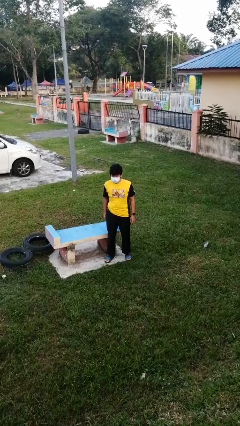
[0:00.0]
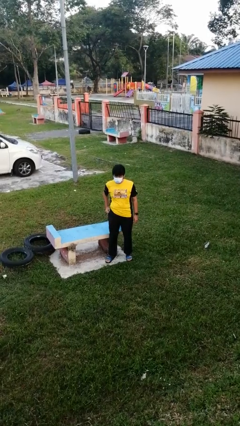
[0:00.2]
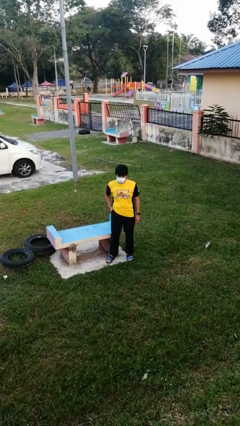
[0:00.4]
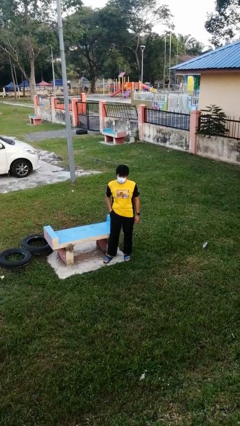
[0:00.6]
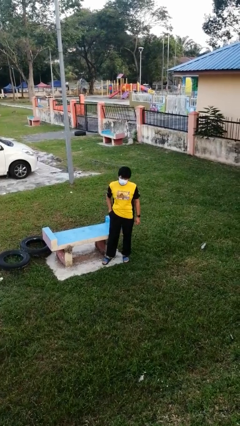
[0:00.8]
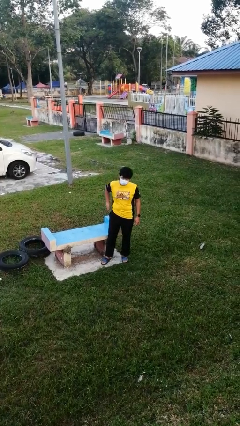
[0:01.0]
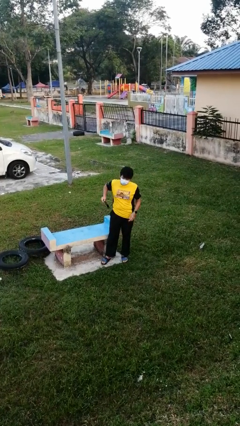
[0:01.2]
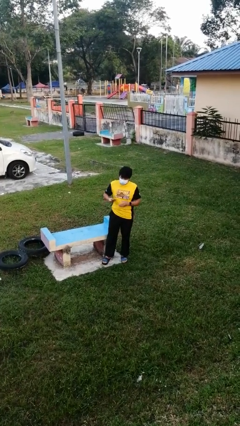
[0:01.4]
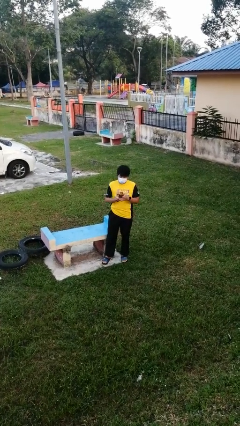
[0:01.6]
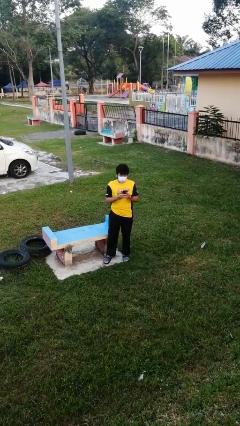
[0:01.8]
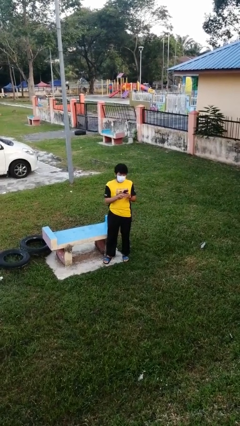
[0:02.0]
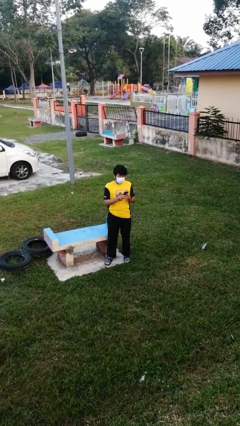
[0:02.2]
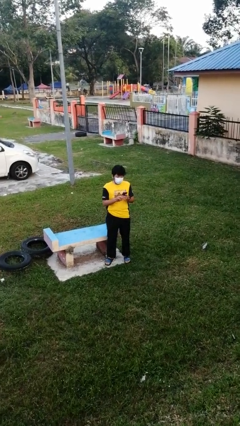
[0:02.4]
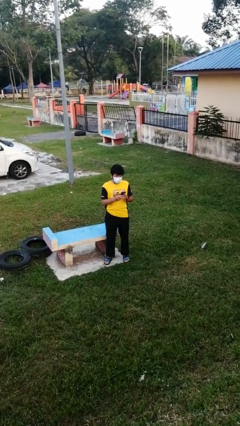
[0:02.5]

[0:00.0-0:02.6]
person takes phone from pocket

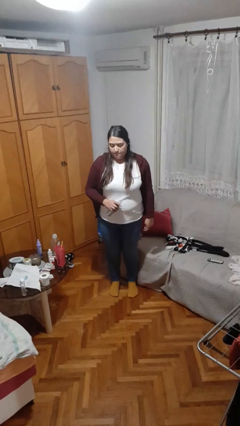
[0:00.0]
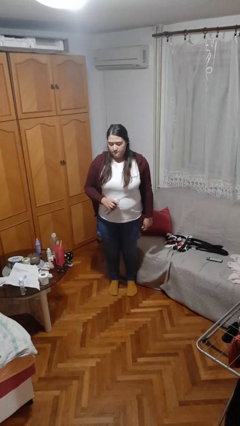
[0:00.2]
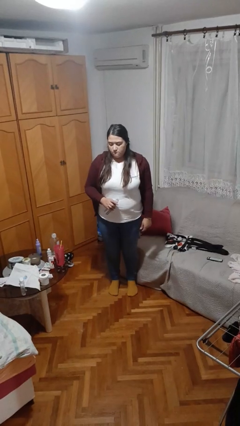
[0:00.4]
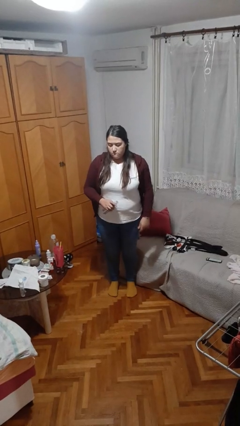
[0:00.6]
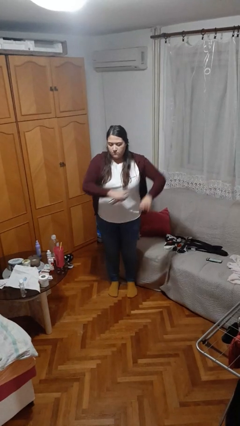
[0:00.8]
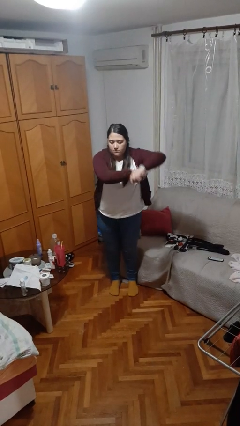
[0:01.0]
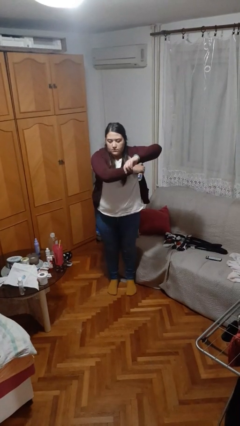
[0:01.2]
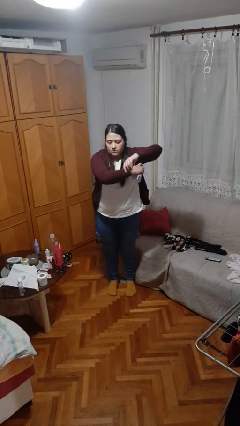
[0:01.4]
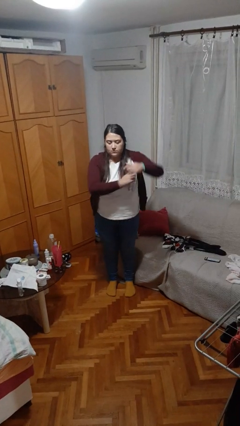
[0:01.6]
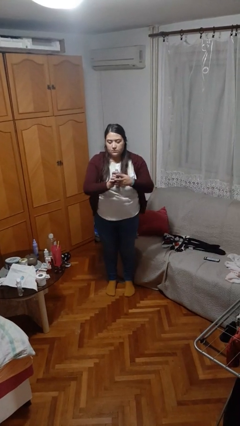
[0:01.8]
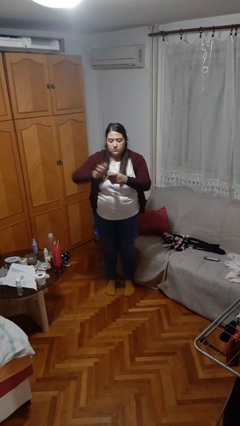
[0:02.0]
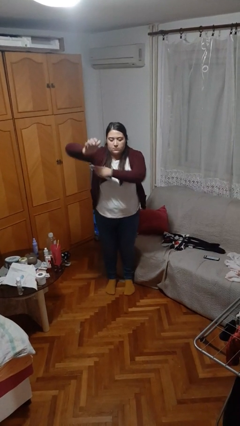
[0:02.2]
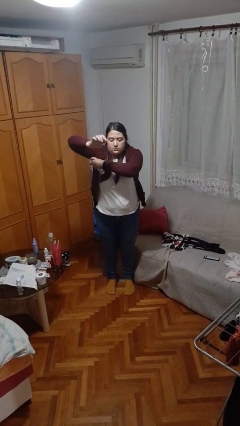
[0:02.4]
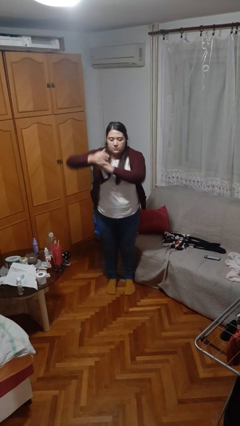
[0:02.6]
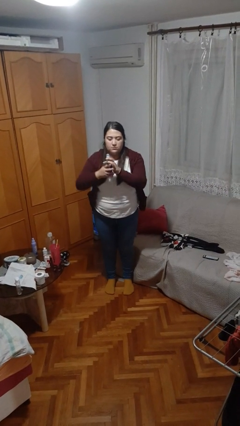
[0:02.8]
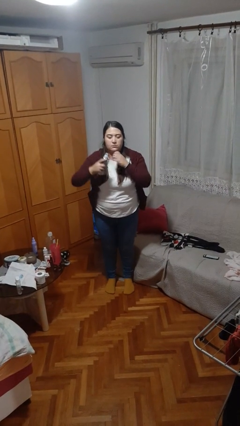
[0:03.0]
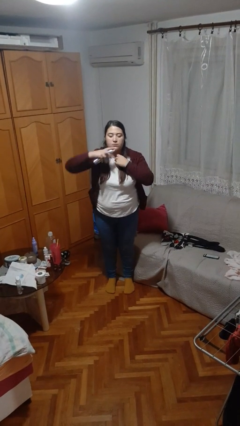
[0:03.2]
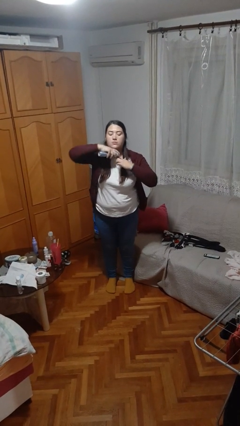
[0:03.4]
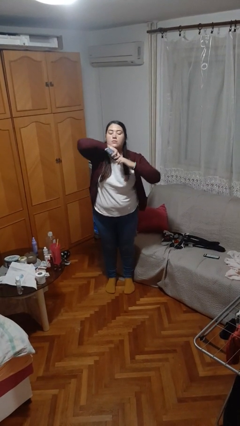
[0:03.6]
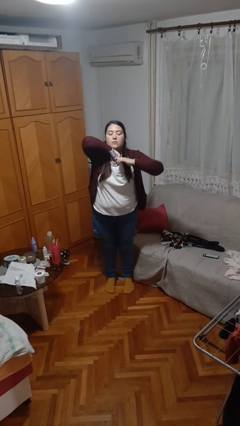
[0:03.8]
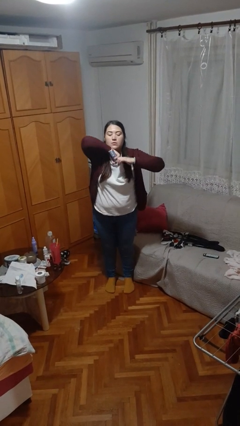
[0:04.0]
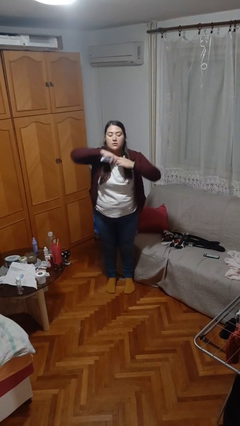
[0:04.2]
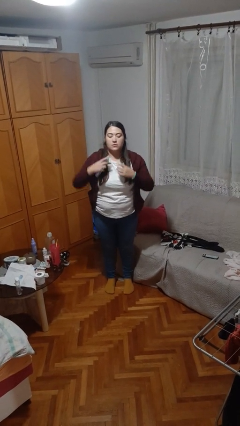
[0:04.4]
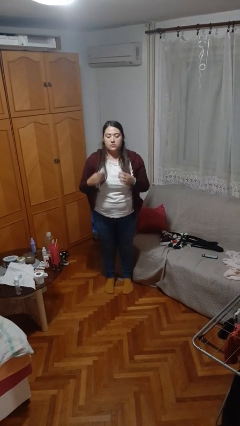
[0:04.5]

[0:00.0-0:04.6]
person applies deodorant

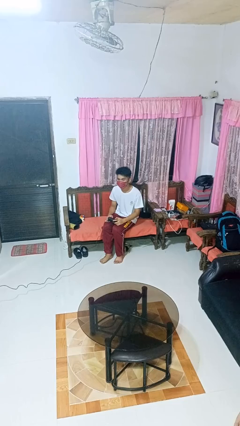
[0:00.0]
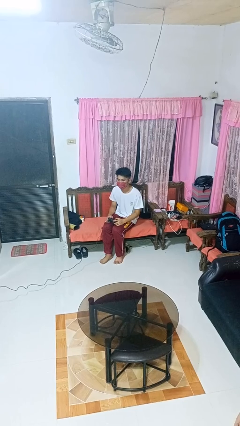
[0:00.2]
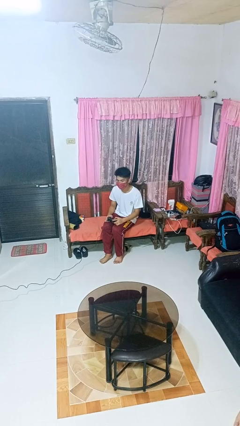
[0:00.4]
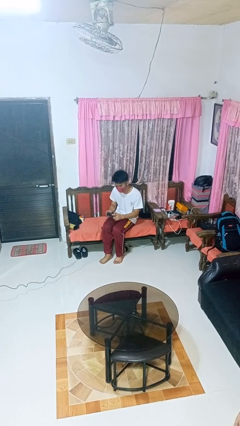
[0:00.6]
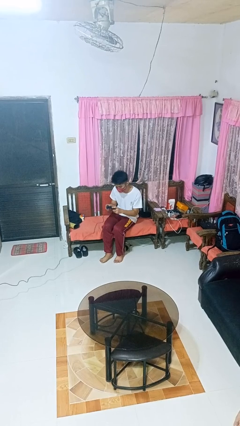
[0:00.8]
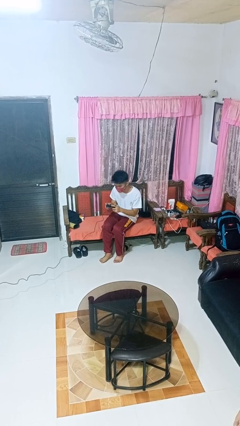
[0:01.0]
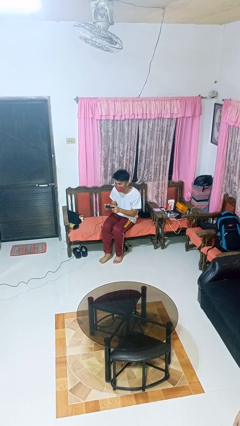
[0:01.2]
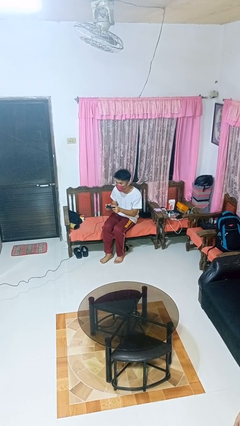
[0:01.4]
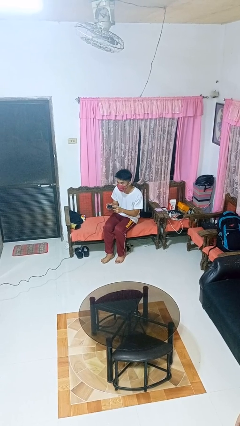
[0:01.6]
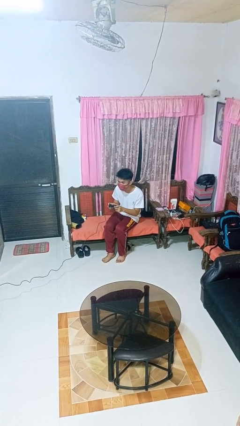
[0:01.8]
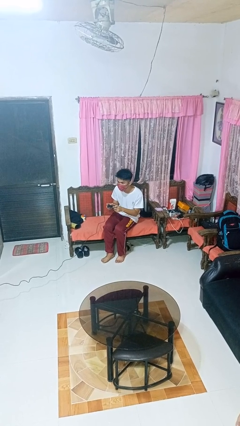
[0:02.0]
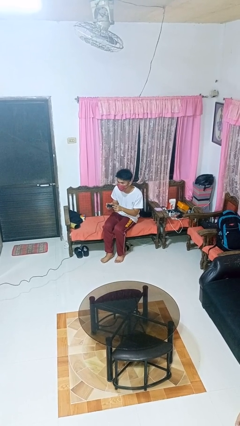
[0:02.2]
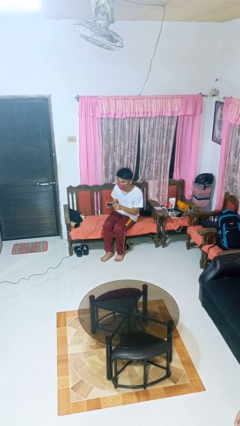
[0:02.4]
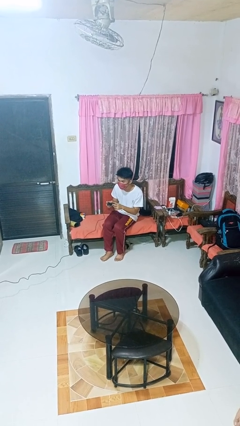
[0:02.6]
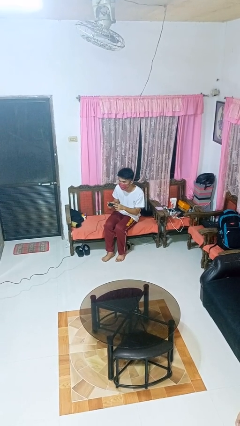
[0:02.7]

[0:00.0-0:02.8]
person interacts with handheld game

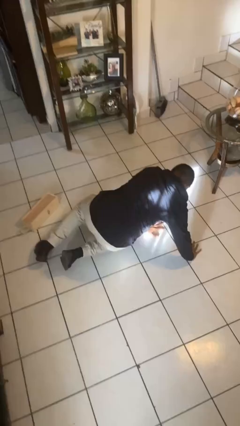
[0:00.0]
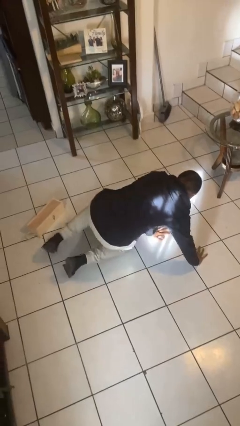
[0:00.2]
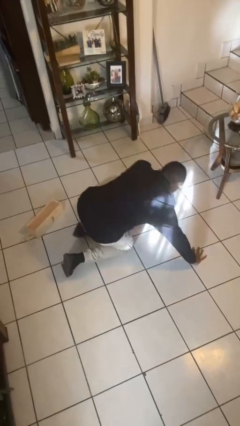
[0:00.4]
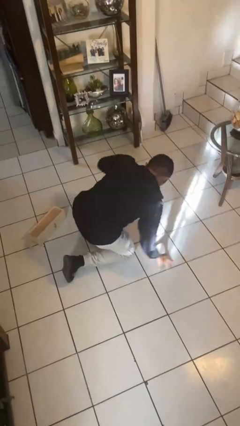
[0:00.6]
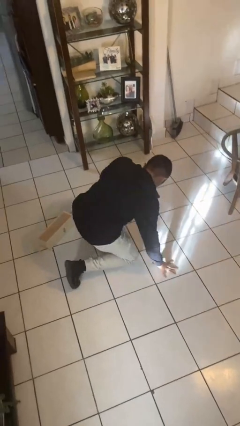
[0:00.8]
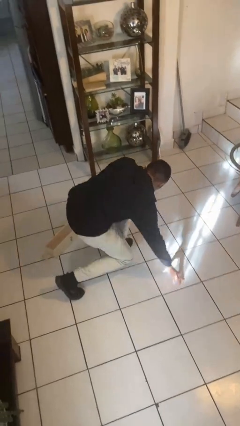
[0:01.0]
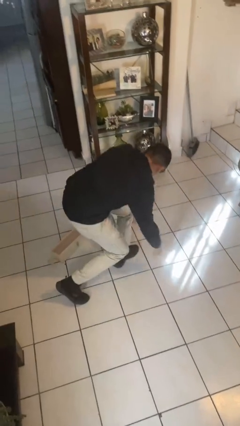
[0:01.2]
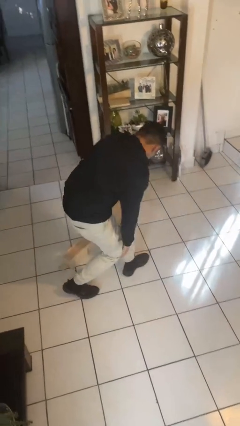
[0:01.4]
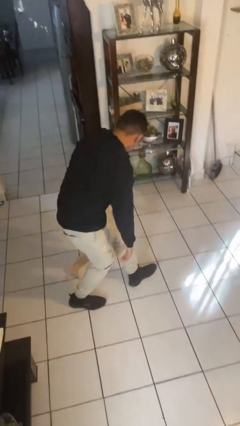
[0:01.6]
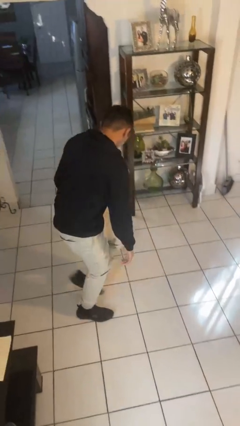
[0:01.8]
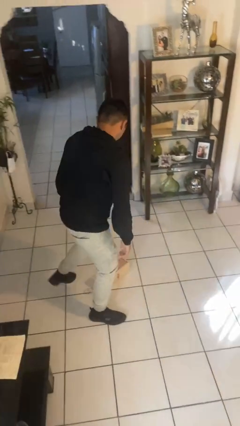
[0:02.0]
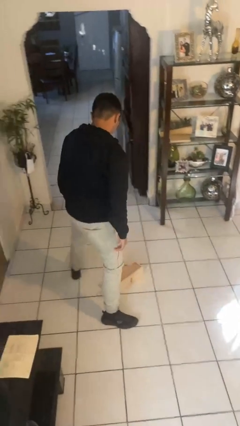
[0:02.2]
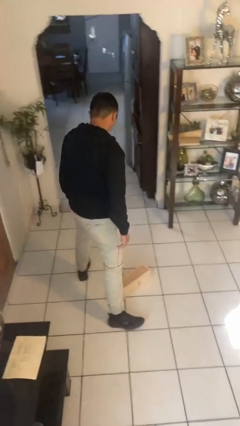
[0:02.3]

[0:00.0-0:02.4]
person stands up from floor

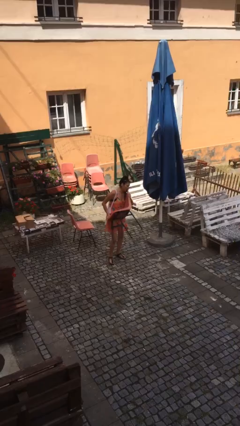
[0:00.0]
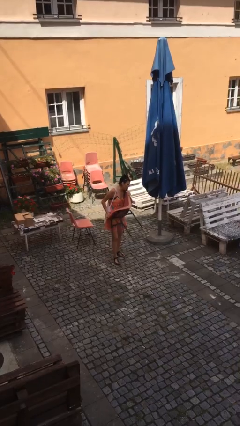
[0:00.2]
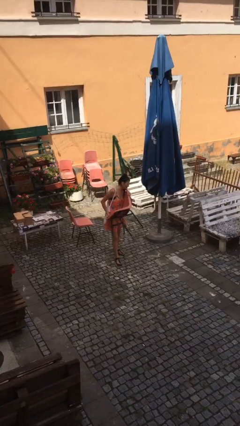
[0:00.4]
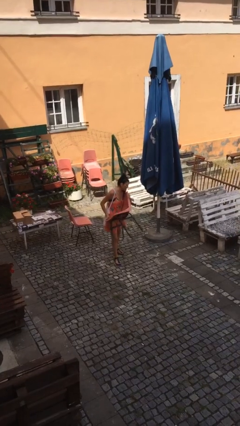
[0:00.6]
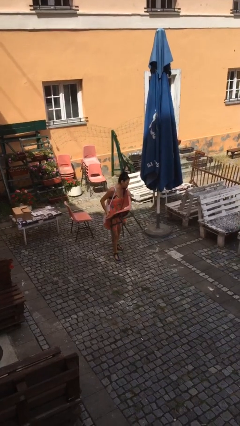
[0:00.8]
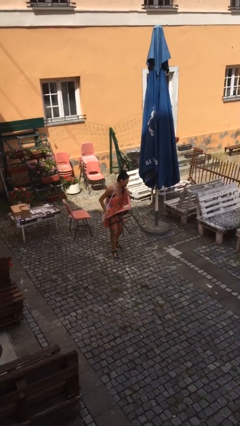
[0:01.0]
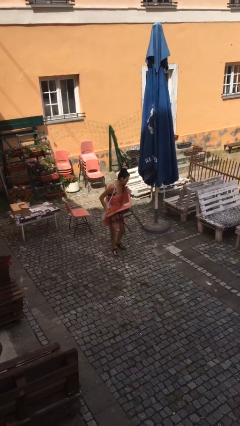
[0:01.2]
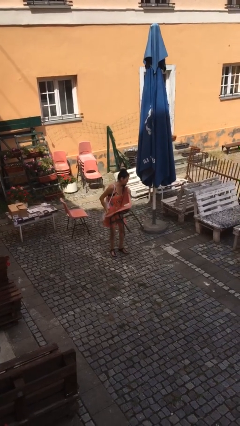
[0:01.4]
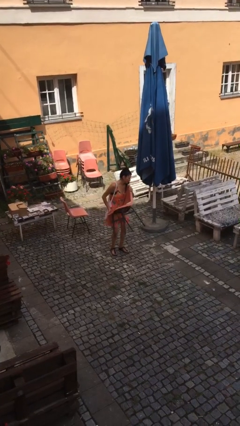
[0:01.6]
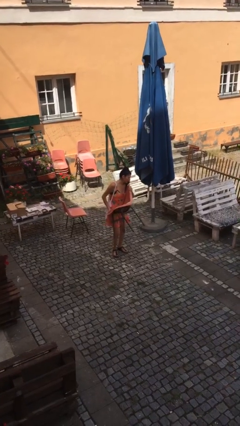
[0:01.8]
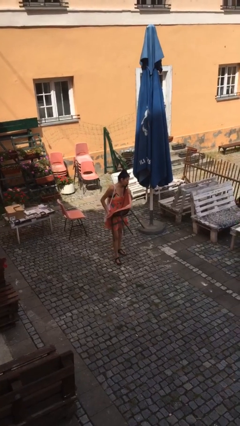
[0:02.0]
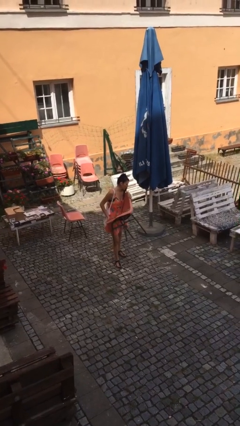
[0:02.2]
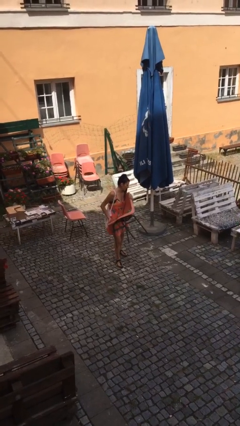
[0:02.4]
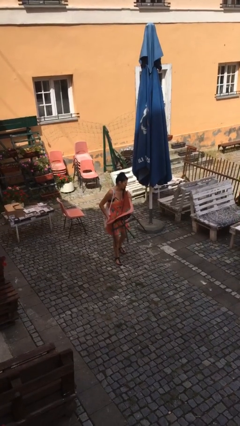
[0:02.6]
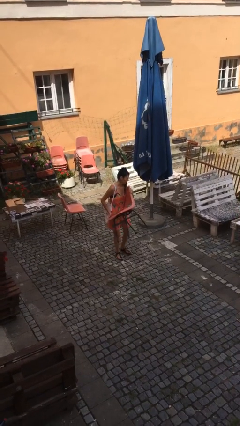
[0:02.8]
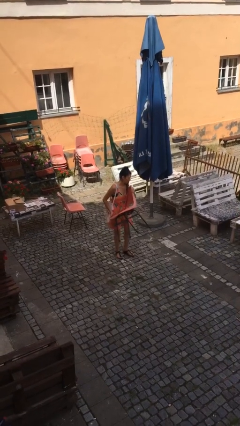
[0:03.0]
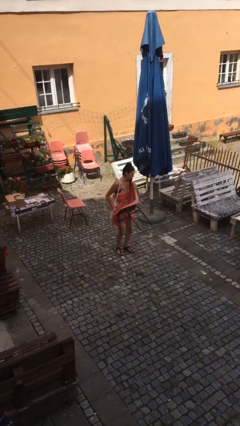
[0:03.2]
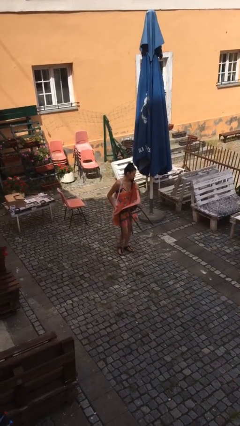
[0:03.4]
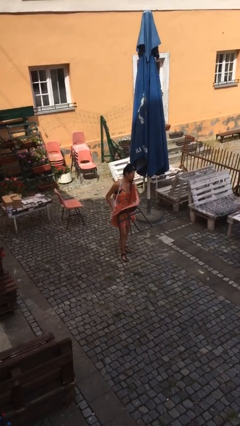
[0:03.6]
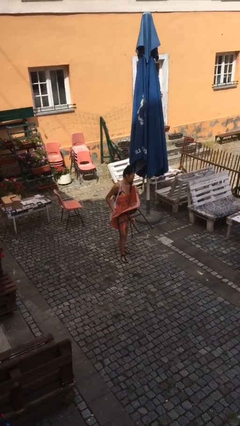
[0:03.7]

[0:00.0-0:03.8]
person carries heavy object

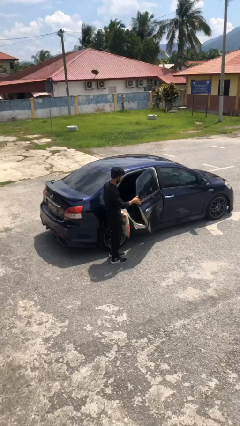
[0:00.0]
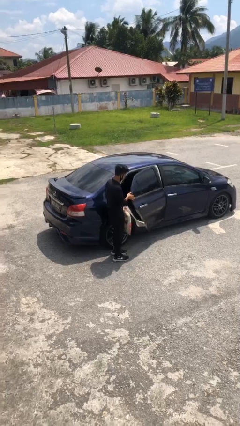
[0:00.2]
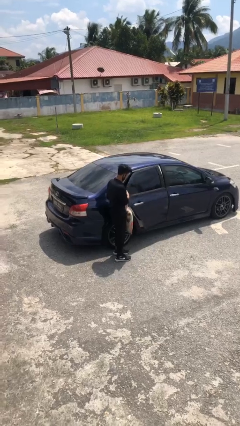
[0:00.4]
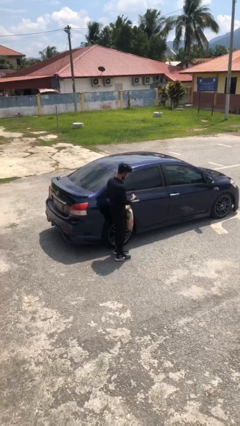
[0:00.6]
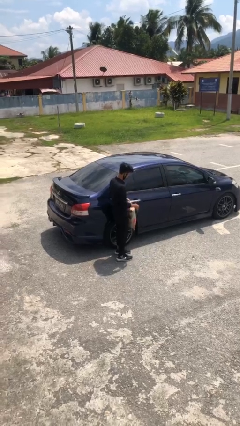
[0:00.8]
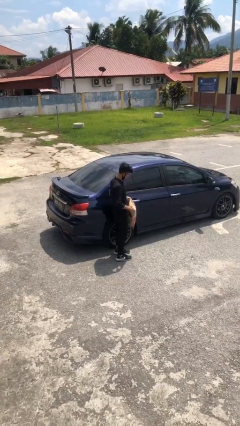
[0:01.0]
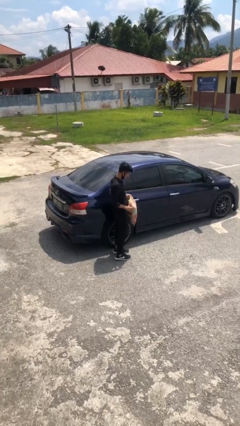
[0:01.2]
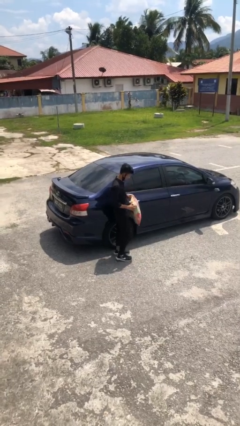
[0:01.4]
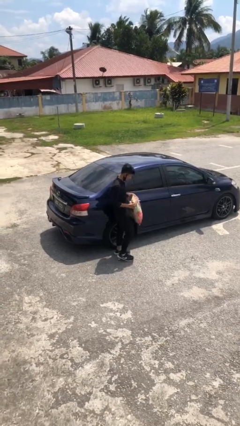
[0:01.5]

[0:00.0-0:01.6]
person closes car door
